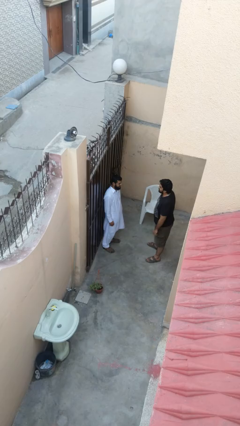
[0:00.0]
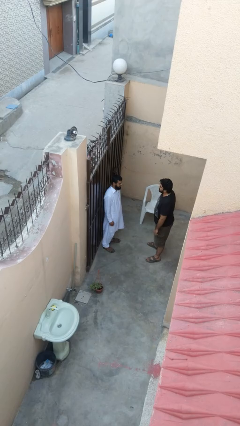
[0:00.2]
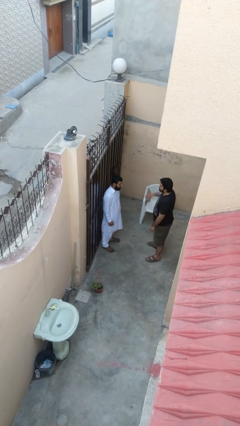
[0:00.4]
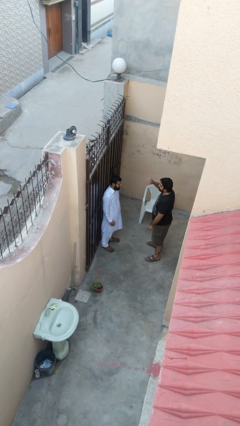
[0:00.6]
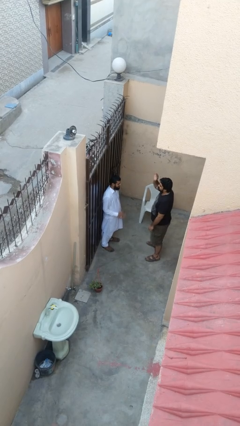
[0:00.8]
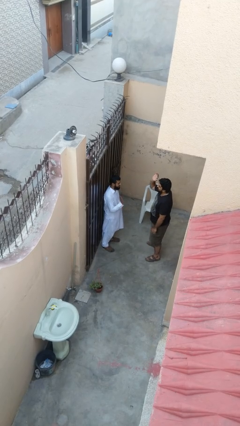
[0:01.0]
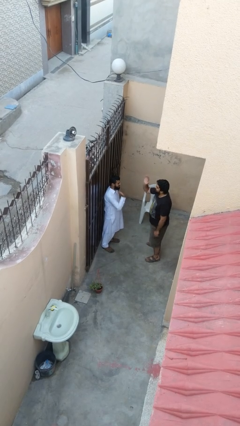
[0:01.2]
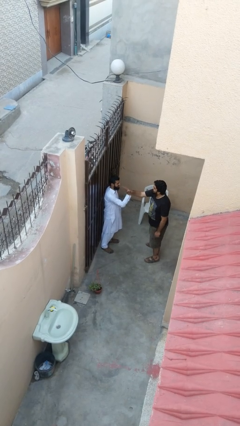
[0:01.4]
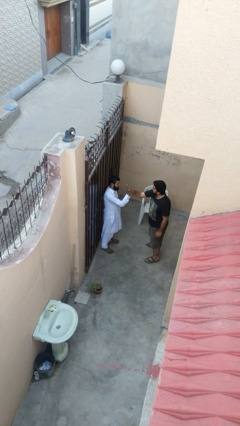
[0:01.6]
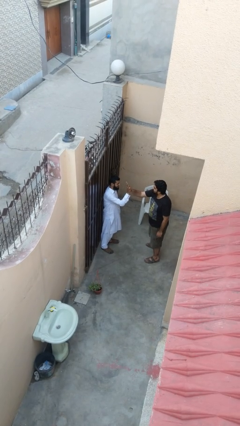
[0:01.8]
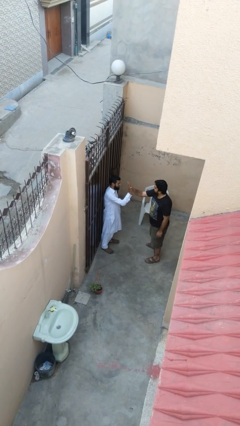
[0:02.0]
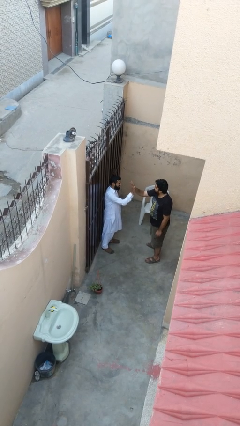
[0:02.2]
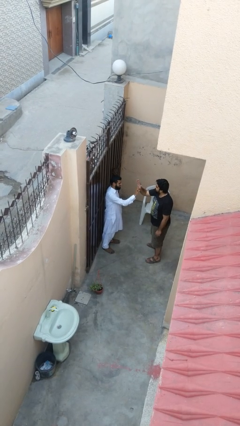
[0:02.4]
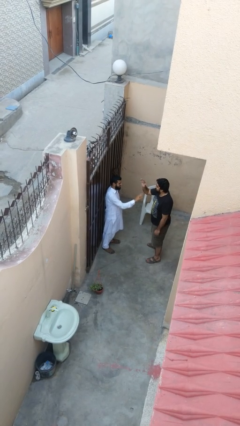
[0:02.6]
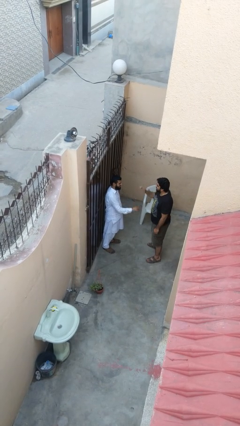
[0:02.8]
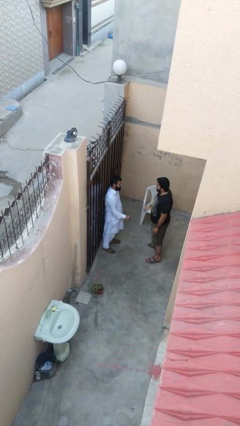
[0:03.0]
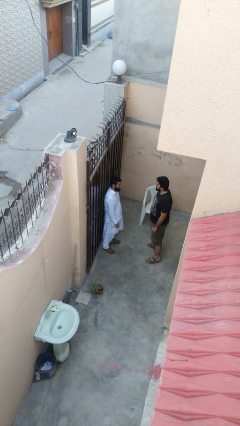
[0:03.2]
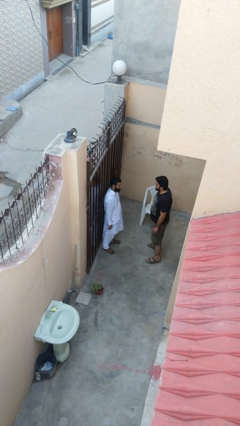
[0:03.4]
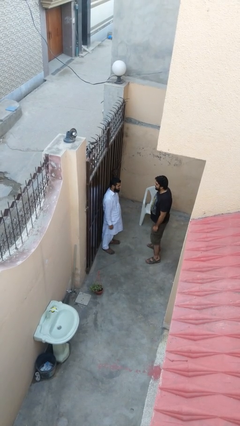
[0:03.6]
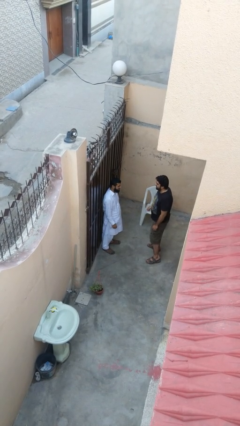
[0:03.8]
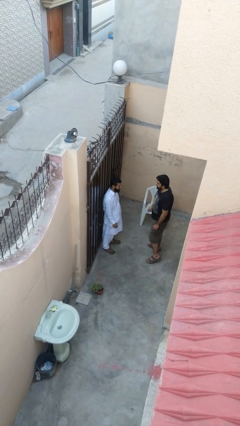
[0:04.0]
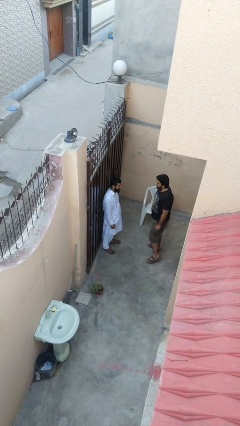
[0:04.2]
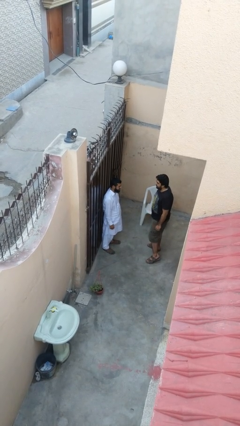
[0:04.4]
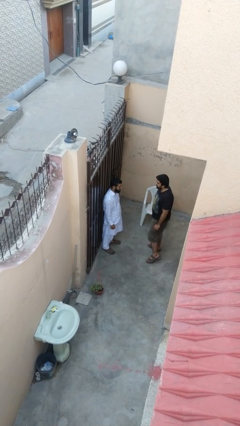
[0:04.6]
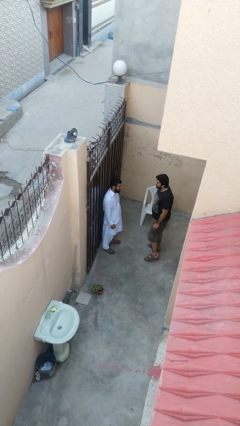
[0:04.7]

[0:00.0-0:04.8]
person highfives hand

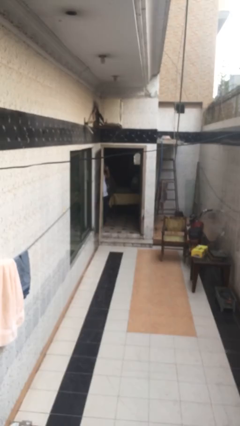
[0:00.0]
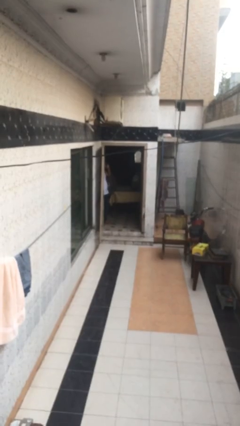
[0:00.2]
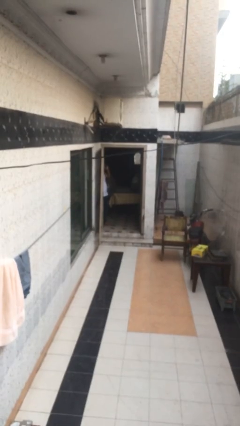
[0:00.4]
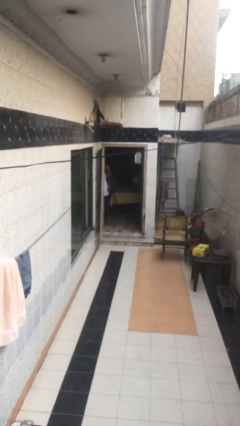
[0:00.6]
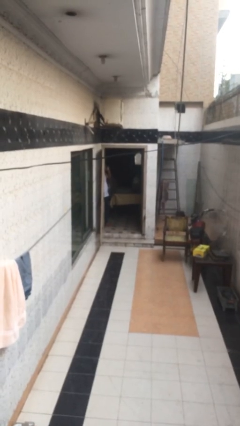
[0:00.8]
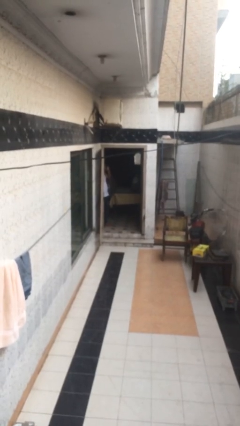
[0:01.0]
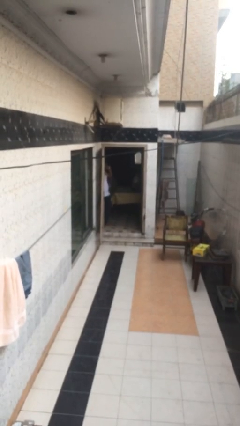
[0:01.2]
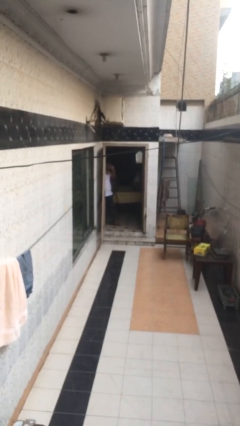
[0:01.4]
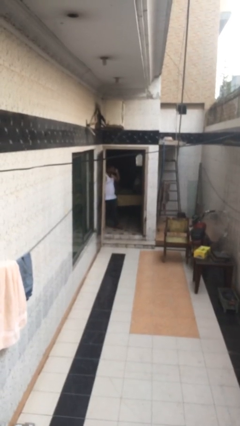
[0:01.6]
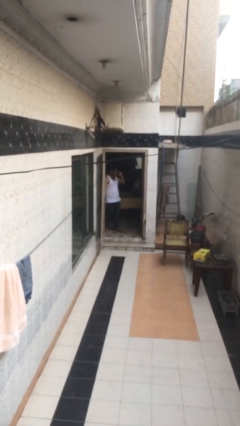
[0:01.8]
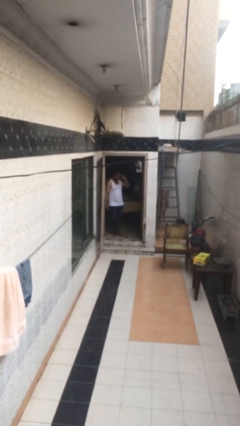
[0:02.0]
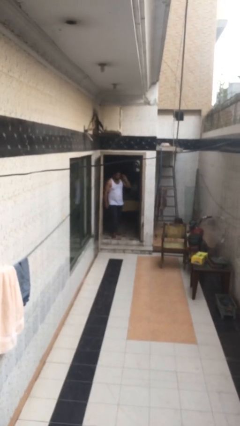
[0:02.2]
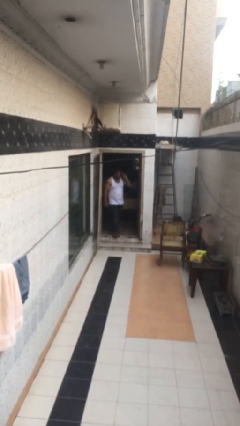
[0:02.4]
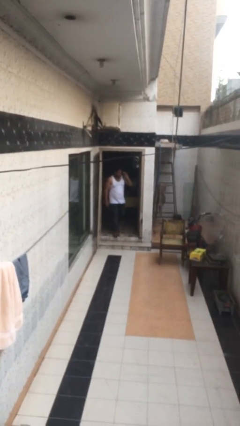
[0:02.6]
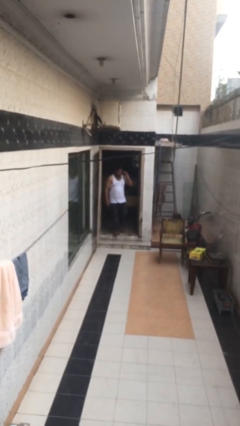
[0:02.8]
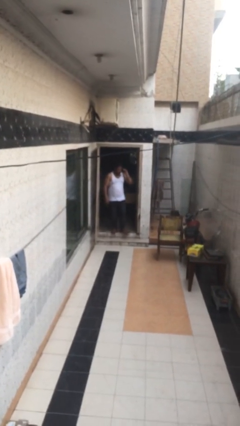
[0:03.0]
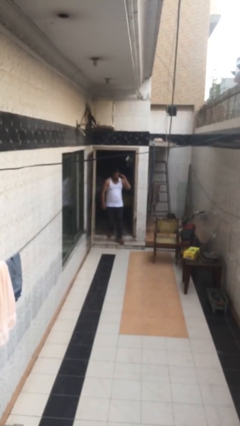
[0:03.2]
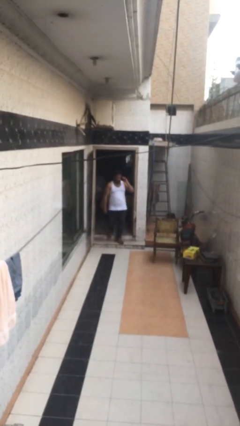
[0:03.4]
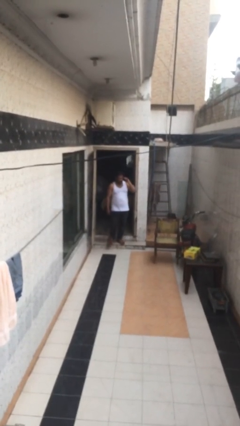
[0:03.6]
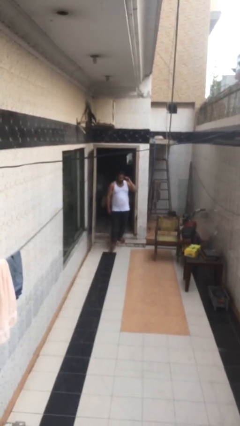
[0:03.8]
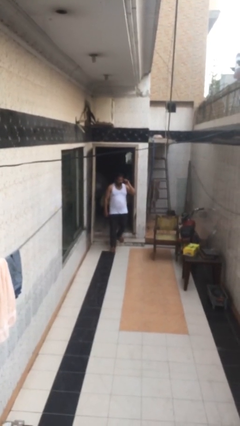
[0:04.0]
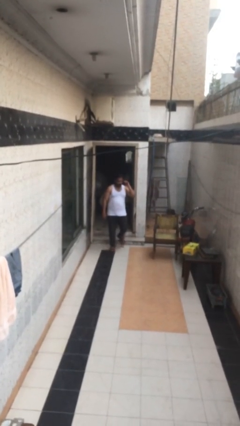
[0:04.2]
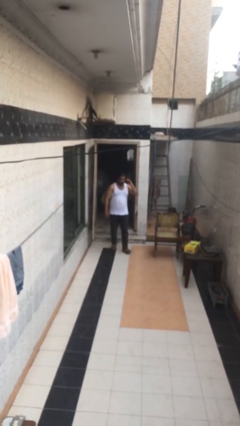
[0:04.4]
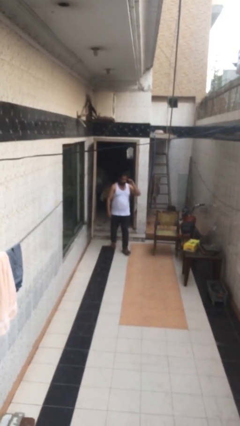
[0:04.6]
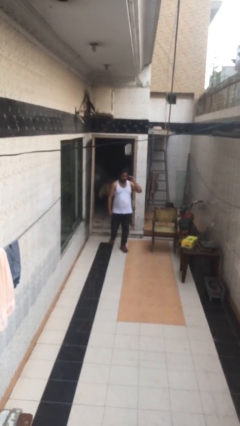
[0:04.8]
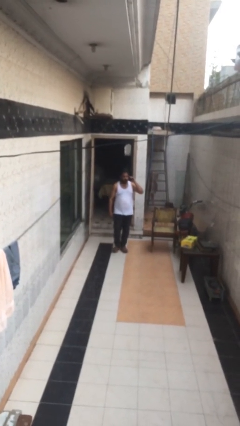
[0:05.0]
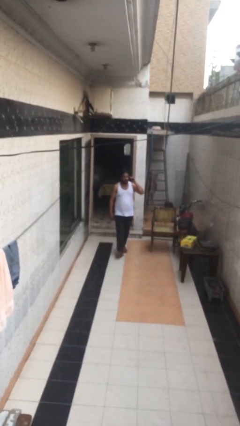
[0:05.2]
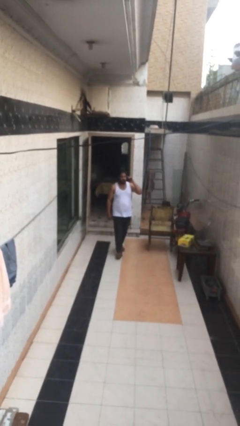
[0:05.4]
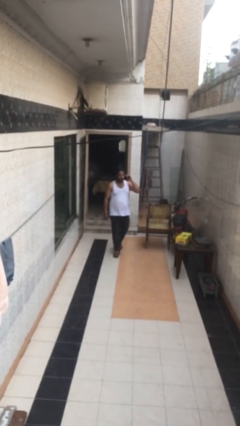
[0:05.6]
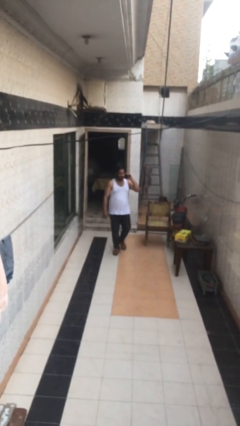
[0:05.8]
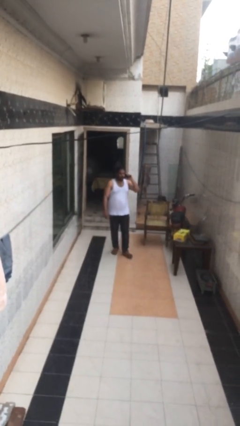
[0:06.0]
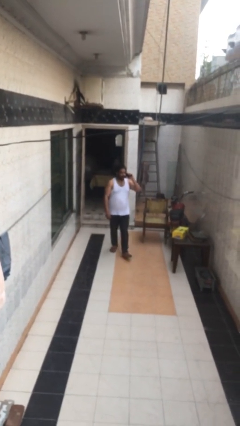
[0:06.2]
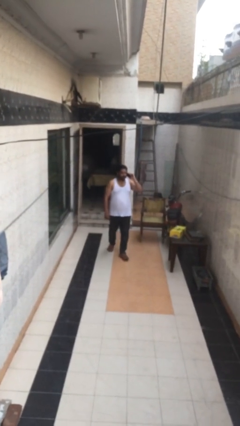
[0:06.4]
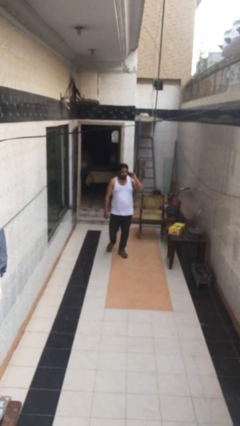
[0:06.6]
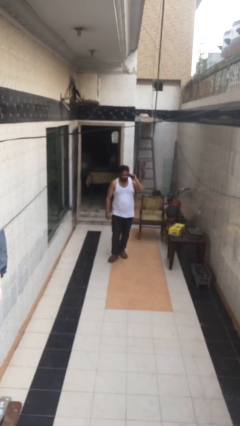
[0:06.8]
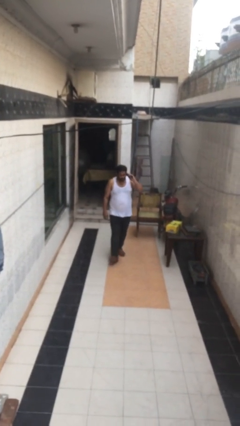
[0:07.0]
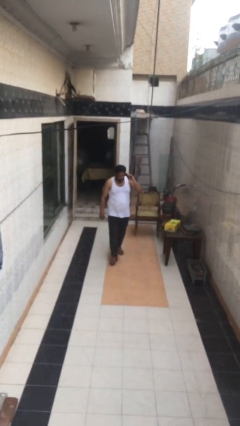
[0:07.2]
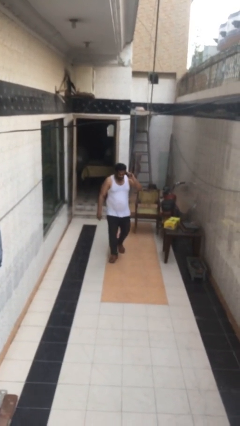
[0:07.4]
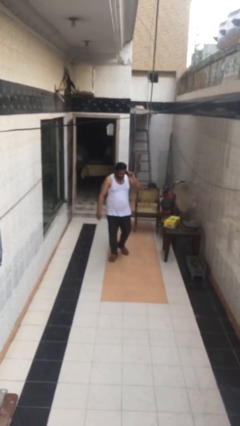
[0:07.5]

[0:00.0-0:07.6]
person enters scene through structure

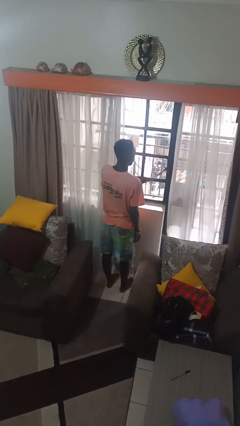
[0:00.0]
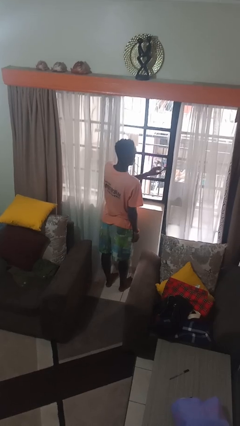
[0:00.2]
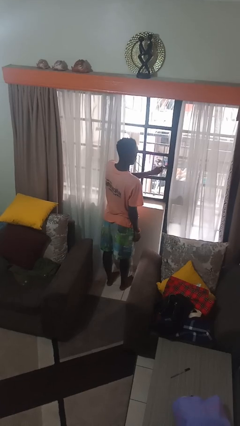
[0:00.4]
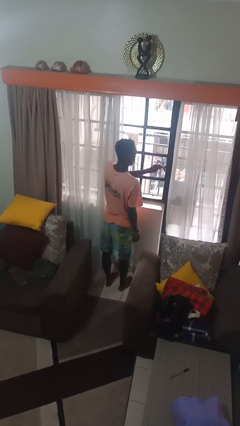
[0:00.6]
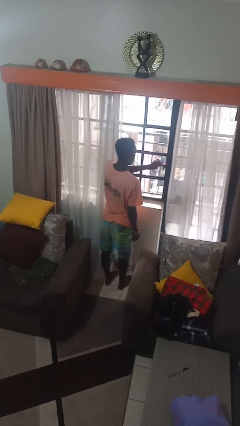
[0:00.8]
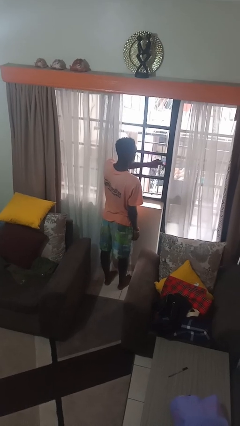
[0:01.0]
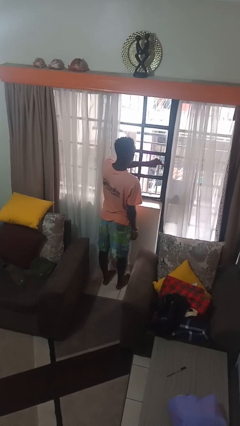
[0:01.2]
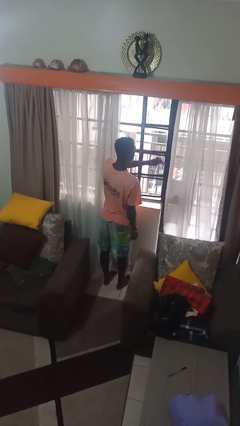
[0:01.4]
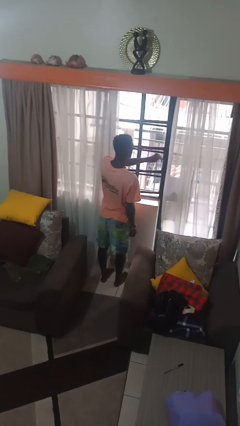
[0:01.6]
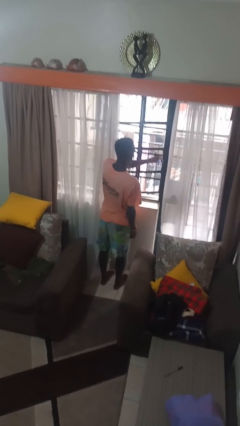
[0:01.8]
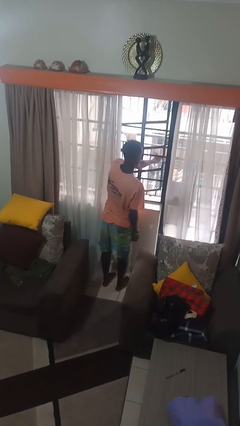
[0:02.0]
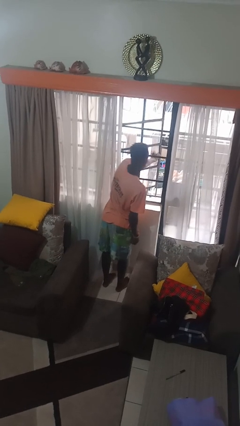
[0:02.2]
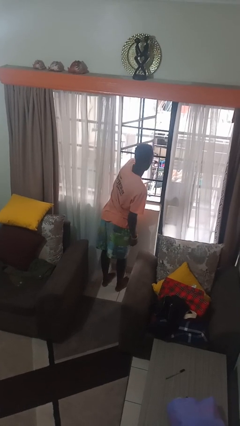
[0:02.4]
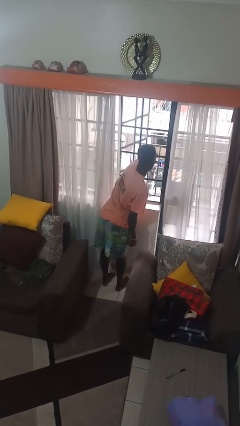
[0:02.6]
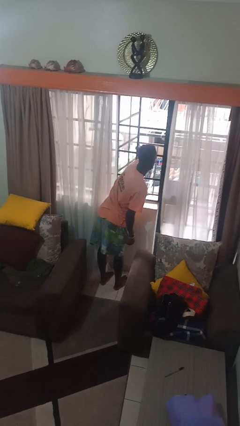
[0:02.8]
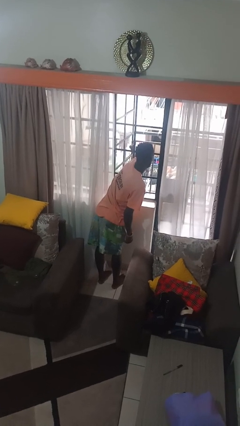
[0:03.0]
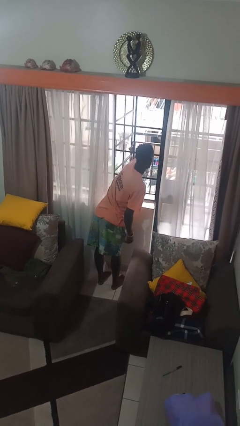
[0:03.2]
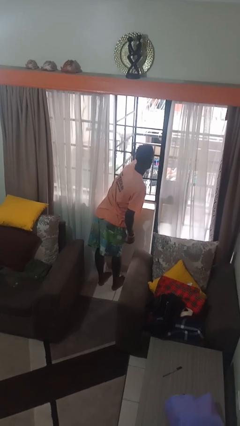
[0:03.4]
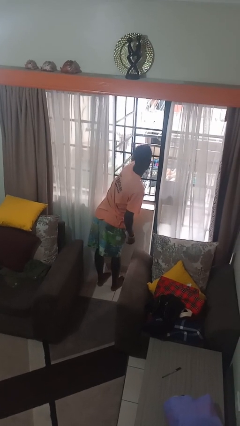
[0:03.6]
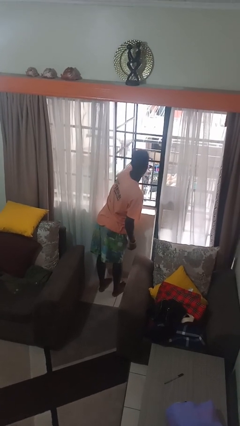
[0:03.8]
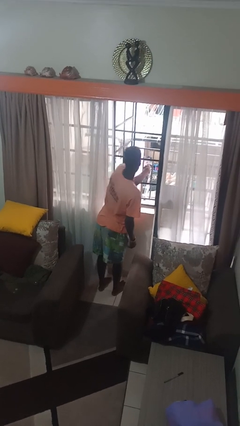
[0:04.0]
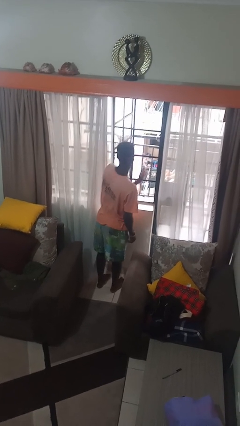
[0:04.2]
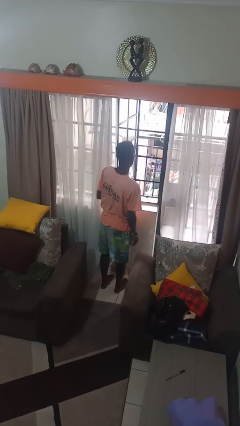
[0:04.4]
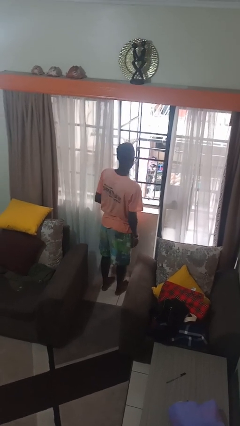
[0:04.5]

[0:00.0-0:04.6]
person opens home window

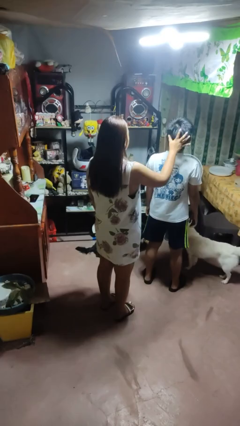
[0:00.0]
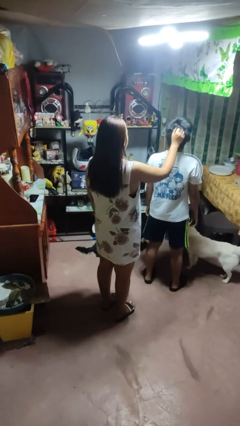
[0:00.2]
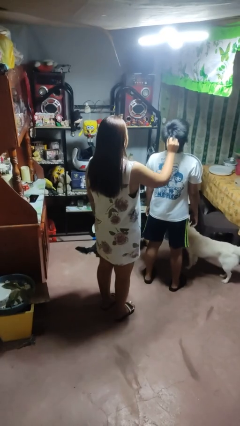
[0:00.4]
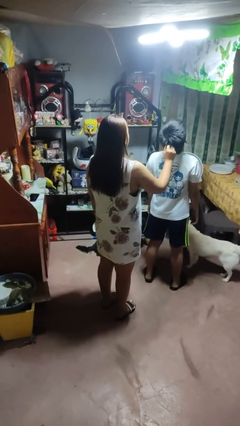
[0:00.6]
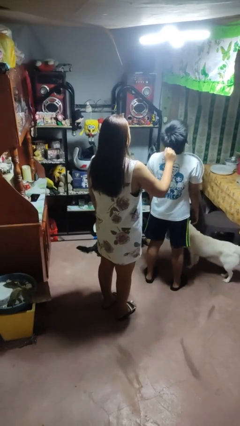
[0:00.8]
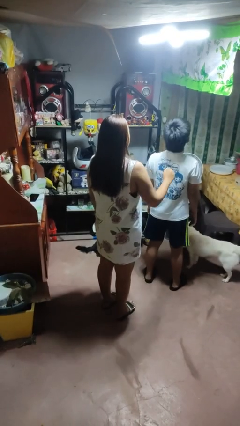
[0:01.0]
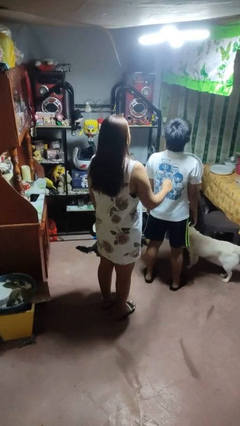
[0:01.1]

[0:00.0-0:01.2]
person grabs person by hair
